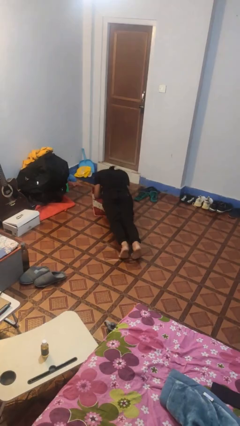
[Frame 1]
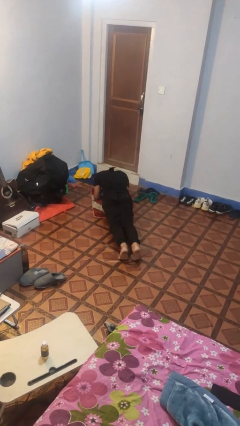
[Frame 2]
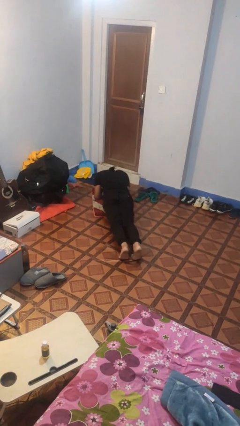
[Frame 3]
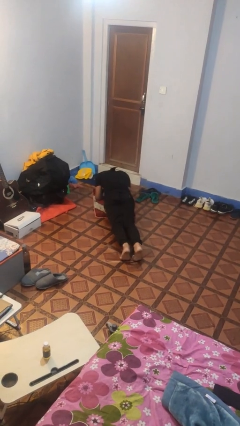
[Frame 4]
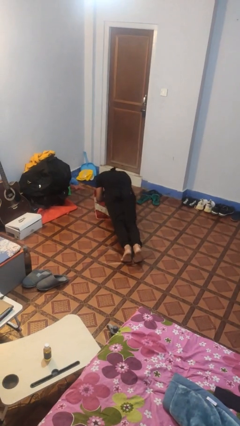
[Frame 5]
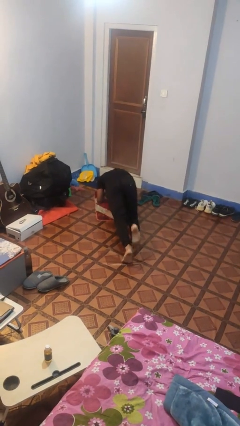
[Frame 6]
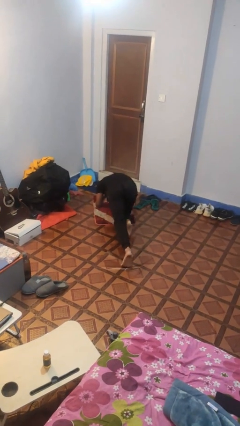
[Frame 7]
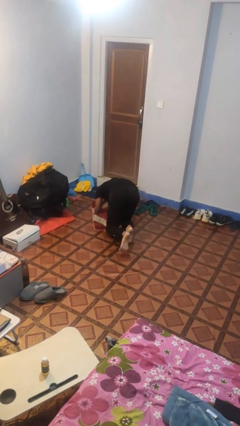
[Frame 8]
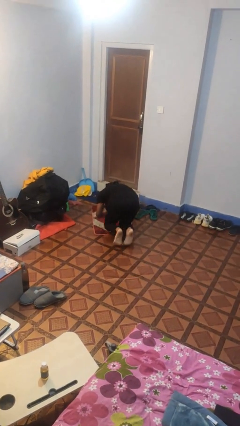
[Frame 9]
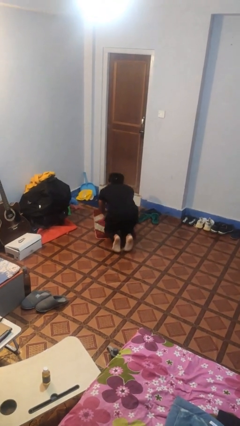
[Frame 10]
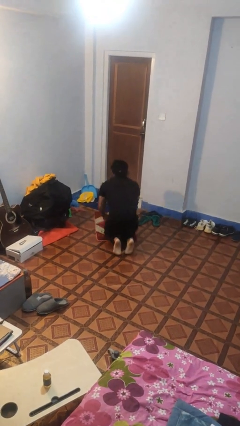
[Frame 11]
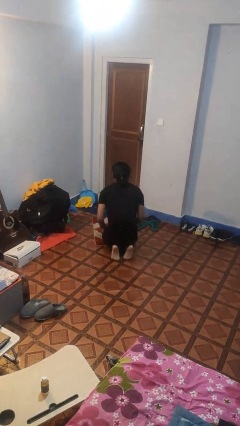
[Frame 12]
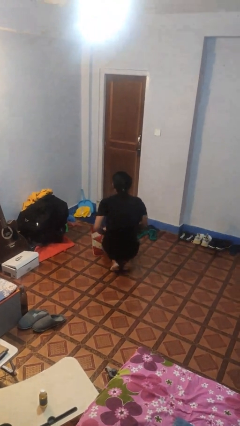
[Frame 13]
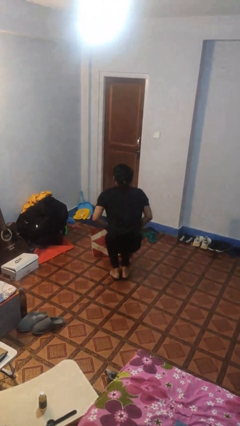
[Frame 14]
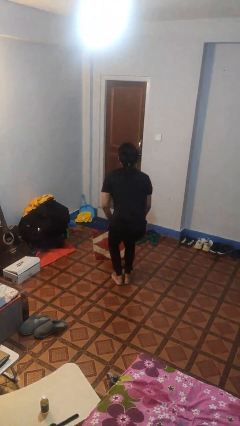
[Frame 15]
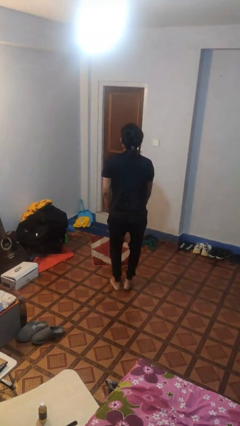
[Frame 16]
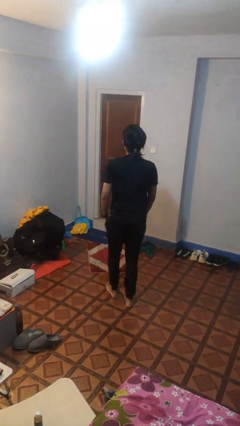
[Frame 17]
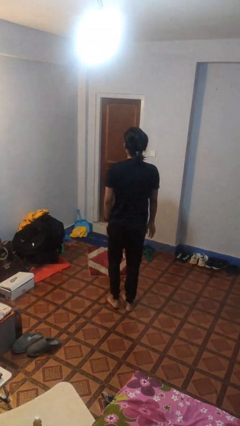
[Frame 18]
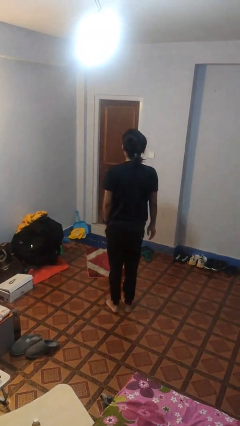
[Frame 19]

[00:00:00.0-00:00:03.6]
person stands up from floor

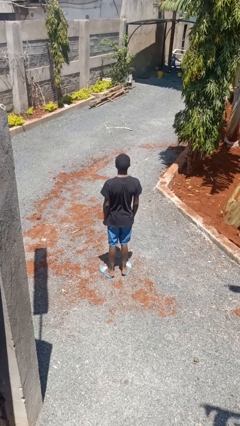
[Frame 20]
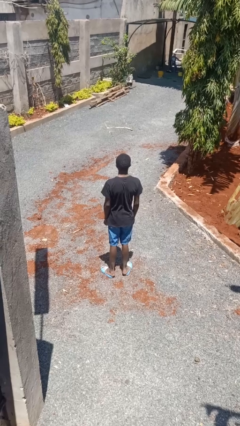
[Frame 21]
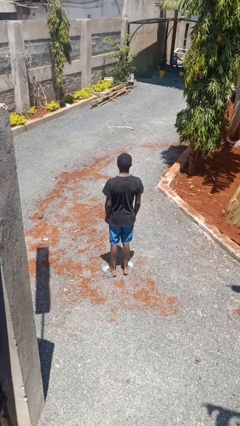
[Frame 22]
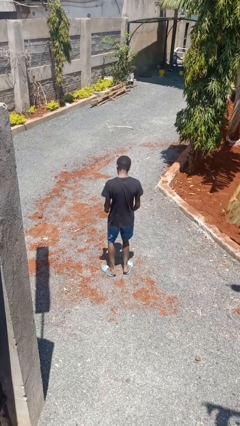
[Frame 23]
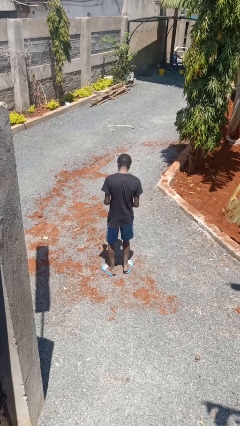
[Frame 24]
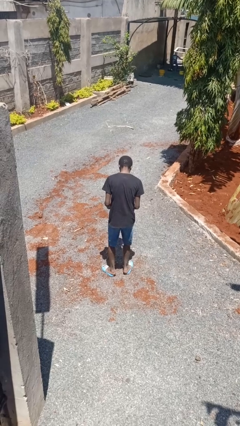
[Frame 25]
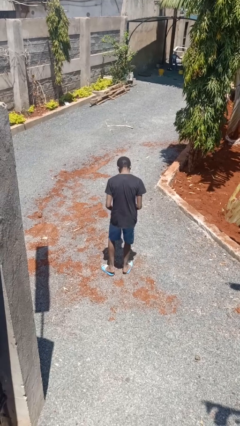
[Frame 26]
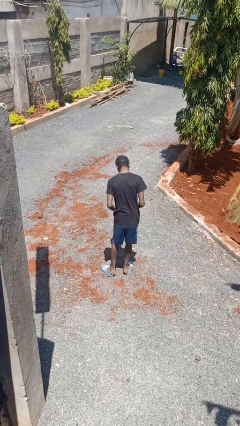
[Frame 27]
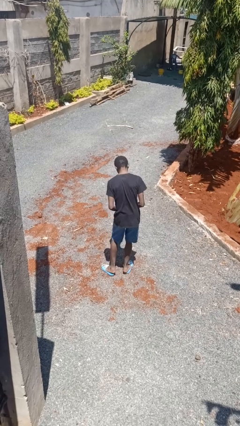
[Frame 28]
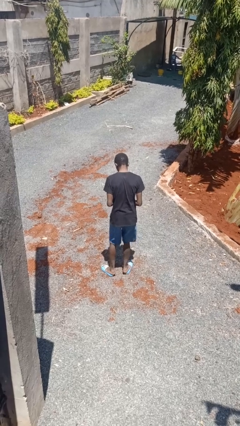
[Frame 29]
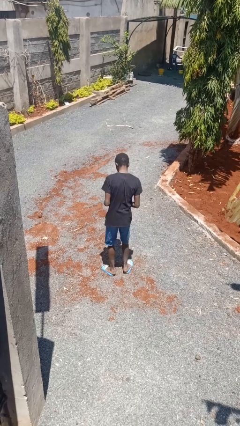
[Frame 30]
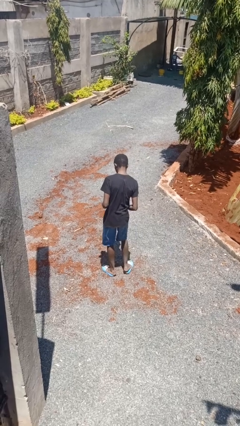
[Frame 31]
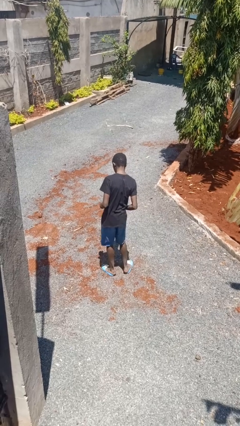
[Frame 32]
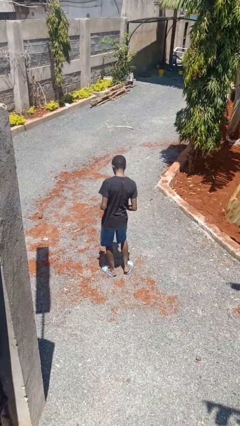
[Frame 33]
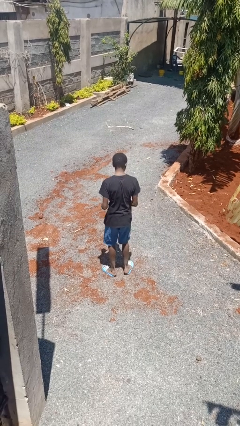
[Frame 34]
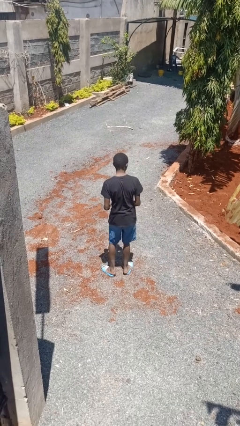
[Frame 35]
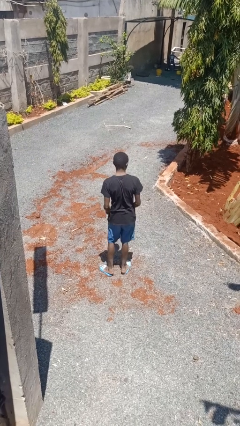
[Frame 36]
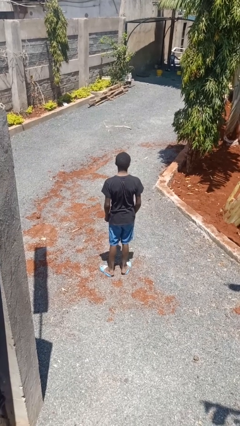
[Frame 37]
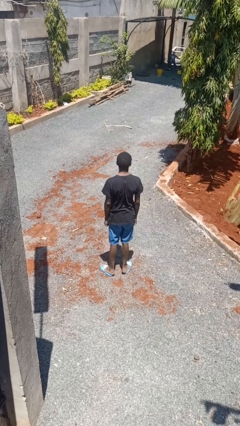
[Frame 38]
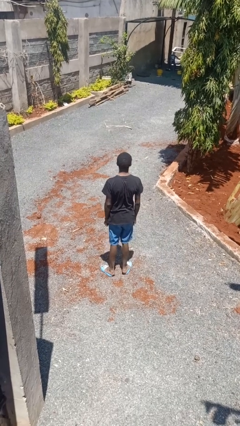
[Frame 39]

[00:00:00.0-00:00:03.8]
person dances in place

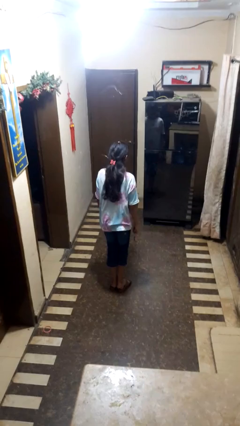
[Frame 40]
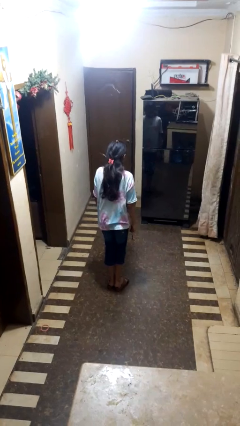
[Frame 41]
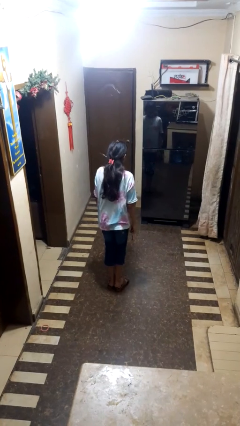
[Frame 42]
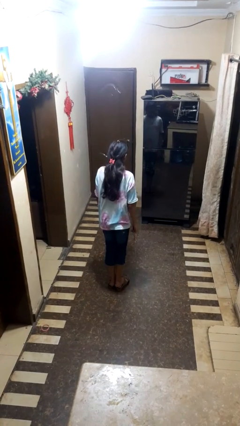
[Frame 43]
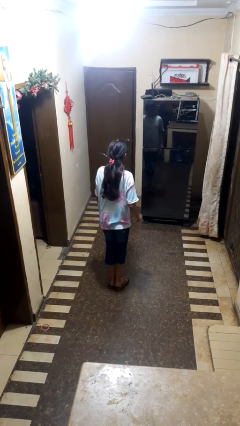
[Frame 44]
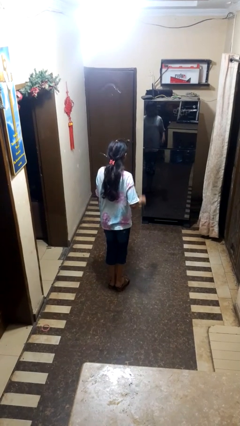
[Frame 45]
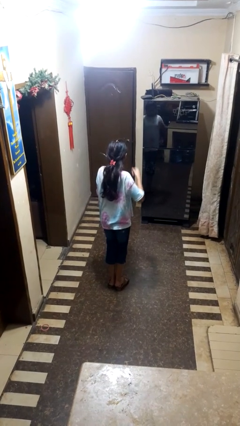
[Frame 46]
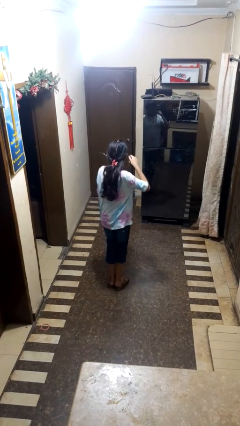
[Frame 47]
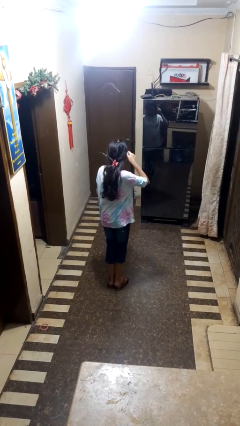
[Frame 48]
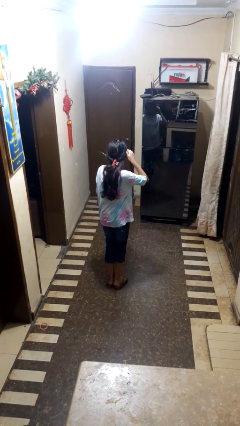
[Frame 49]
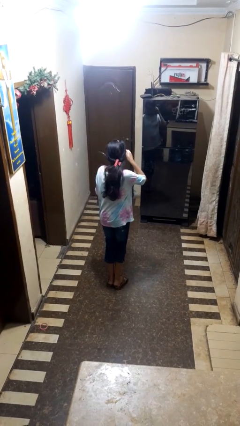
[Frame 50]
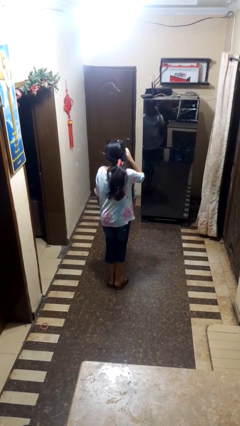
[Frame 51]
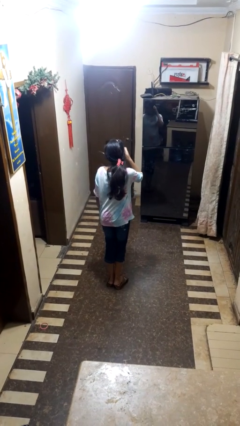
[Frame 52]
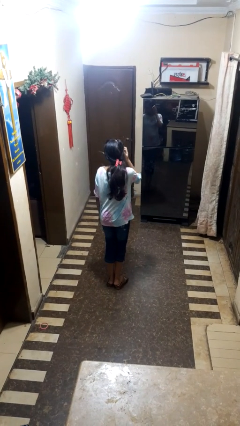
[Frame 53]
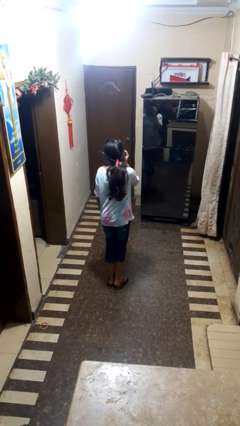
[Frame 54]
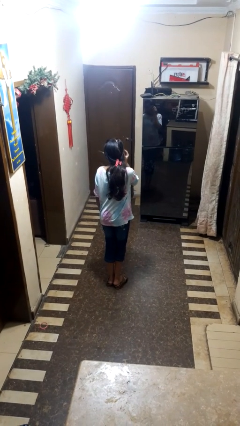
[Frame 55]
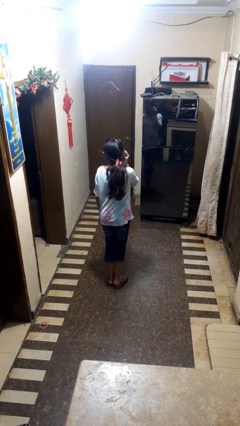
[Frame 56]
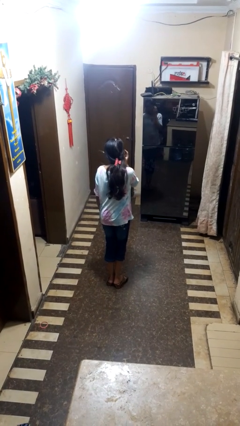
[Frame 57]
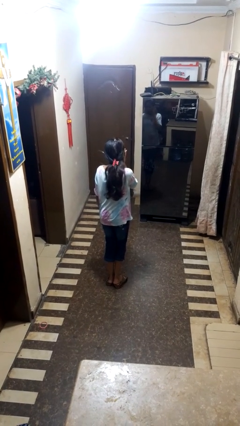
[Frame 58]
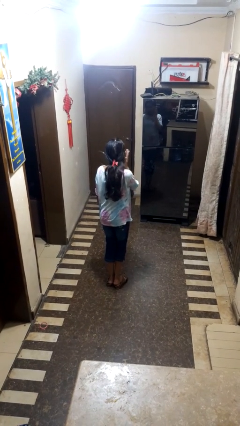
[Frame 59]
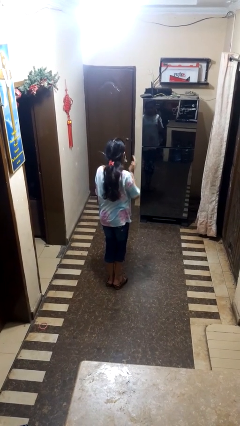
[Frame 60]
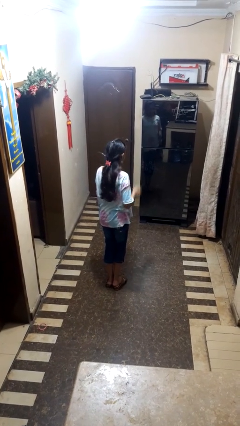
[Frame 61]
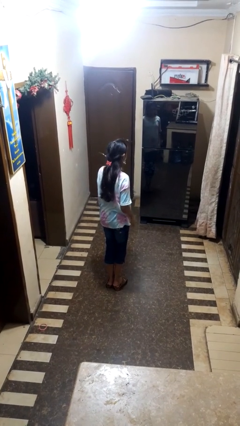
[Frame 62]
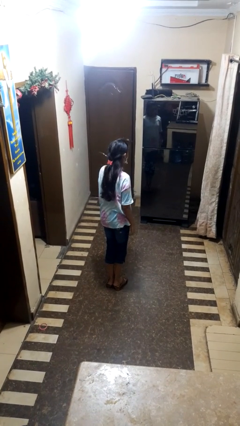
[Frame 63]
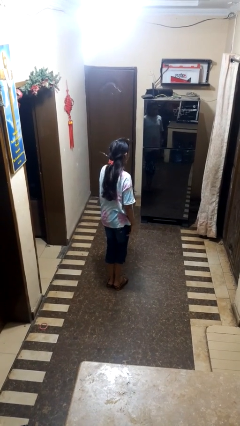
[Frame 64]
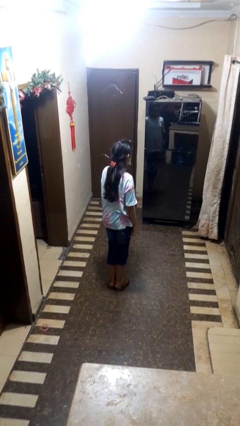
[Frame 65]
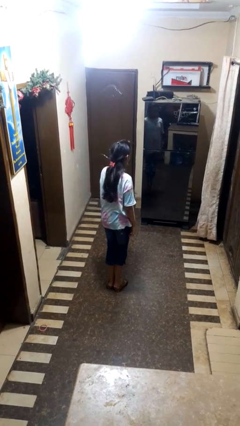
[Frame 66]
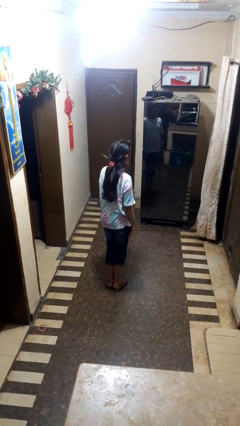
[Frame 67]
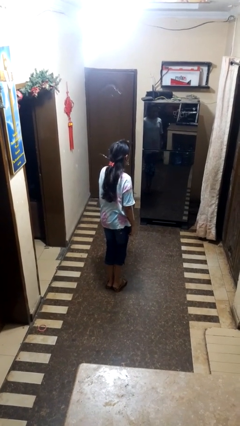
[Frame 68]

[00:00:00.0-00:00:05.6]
person puts on earrings

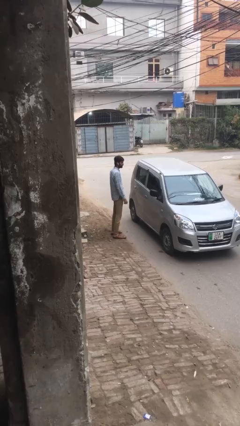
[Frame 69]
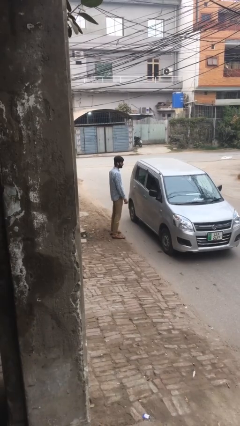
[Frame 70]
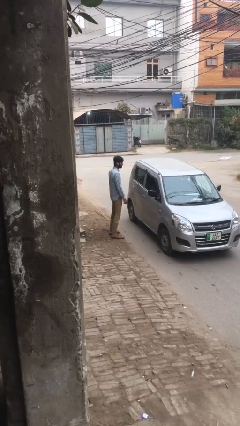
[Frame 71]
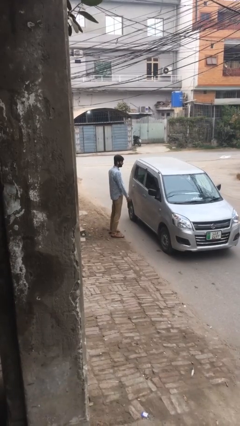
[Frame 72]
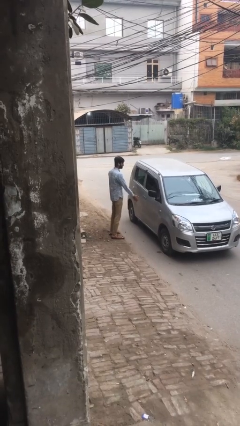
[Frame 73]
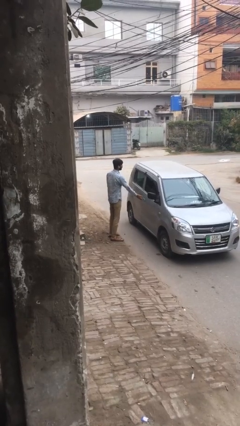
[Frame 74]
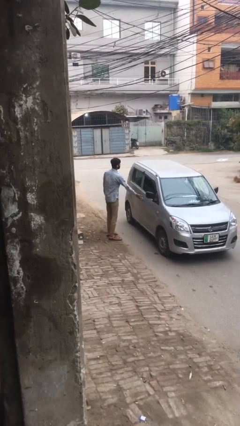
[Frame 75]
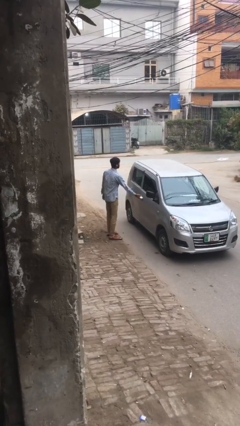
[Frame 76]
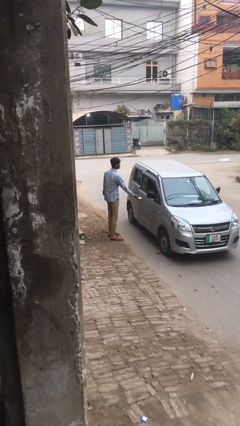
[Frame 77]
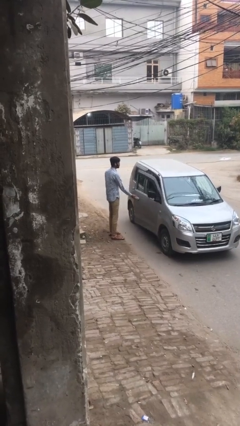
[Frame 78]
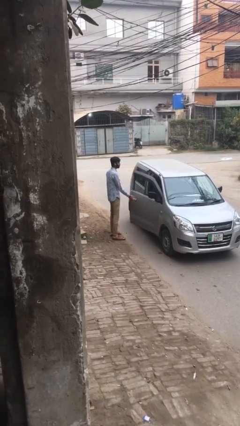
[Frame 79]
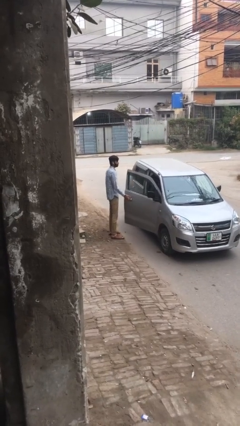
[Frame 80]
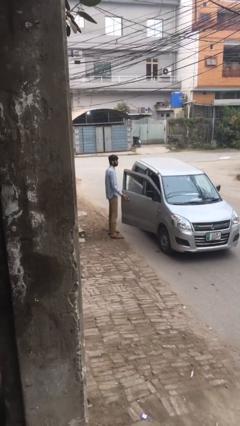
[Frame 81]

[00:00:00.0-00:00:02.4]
person opens car door

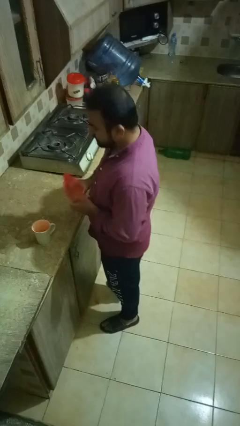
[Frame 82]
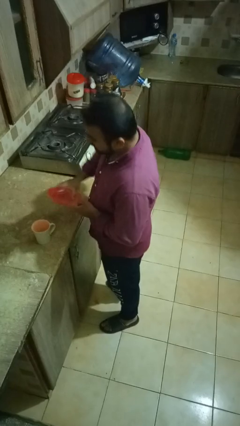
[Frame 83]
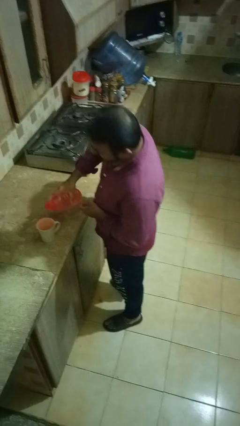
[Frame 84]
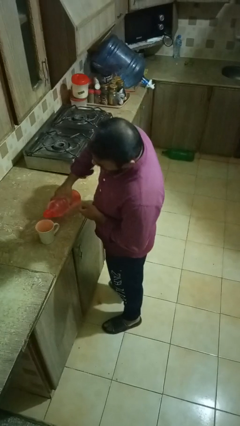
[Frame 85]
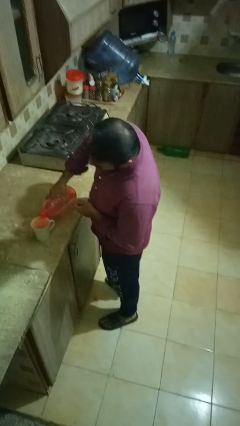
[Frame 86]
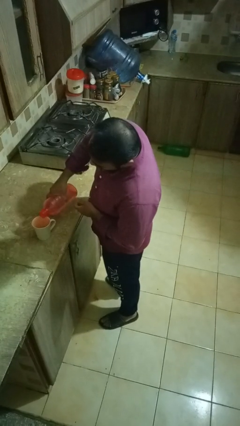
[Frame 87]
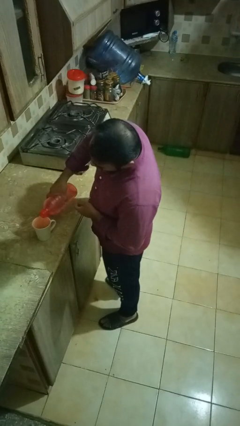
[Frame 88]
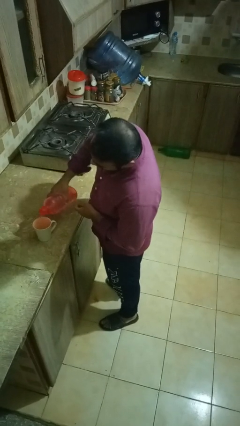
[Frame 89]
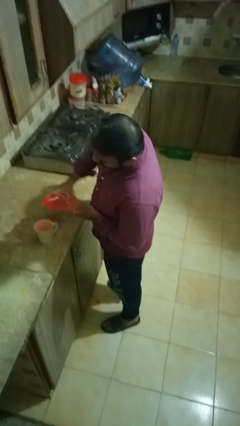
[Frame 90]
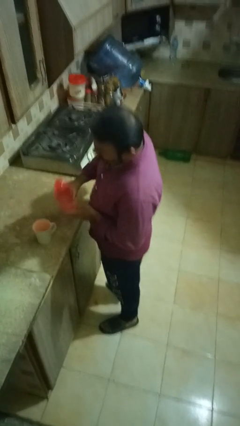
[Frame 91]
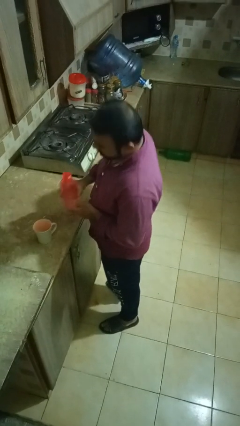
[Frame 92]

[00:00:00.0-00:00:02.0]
person pours liquid into cup

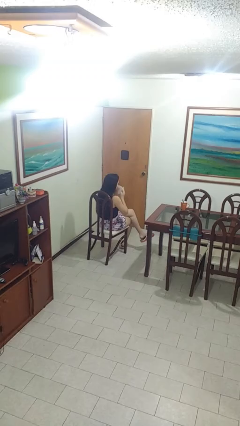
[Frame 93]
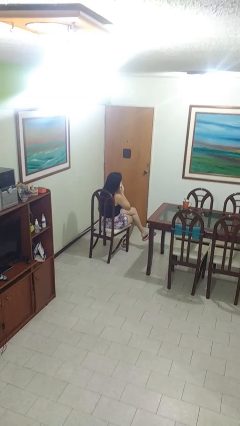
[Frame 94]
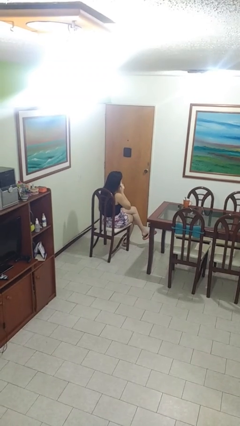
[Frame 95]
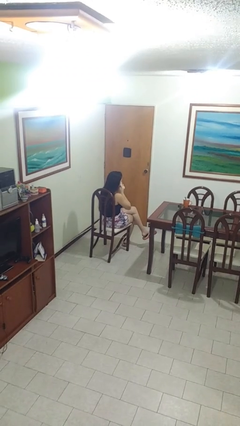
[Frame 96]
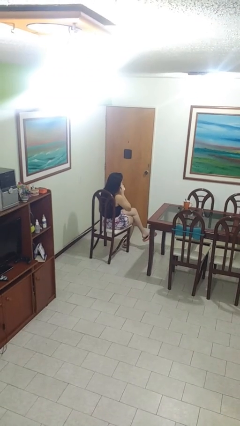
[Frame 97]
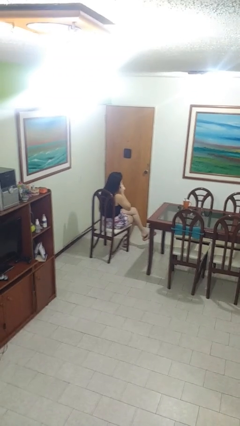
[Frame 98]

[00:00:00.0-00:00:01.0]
person blows nose
